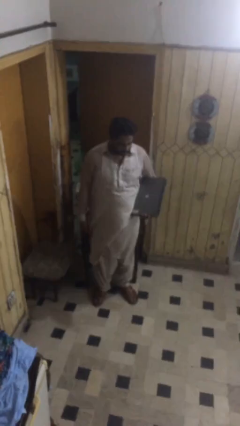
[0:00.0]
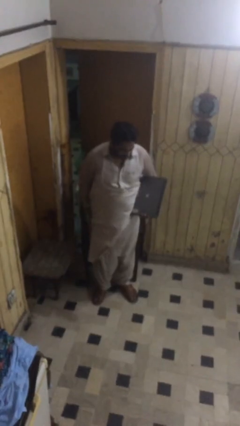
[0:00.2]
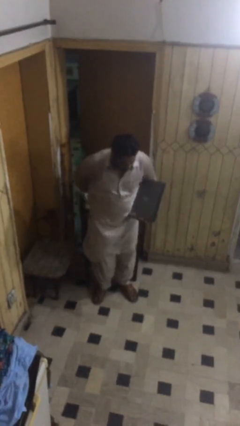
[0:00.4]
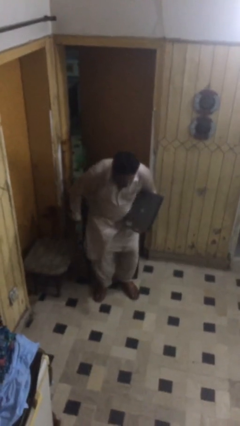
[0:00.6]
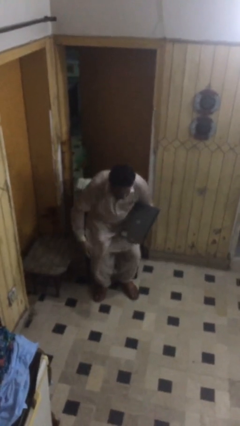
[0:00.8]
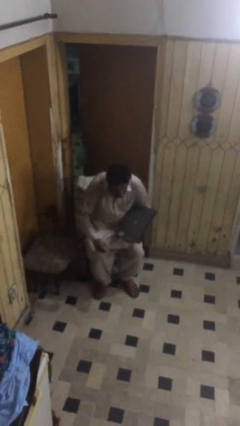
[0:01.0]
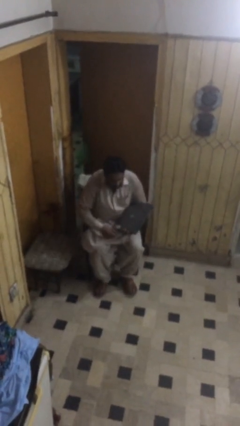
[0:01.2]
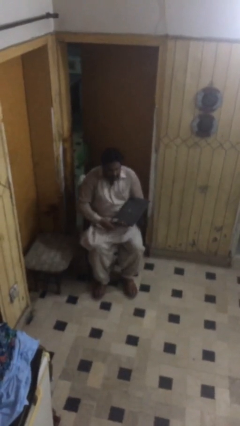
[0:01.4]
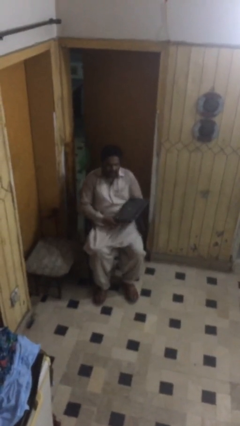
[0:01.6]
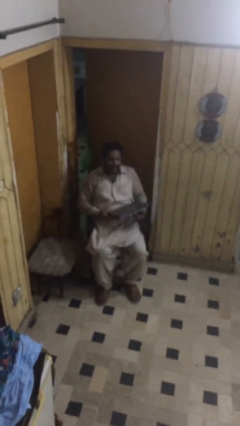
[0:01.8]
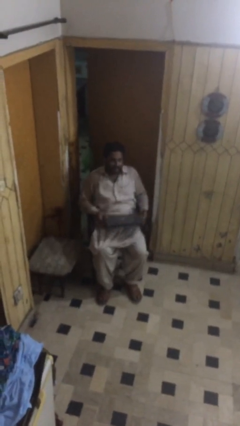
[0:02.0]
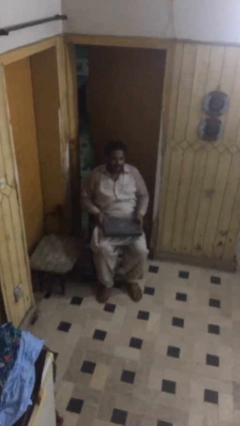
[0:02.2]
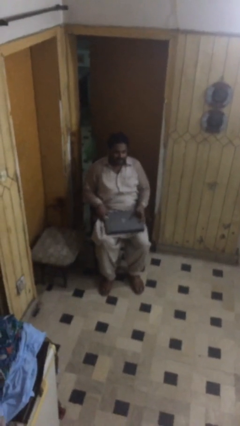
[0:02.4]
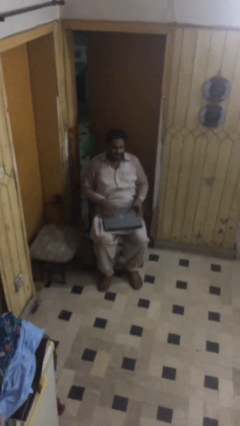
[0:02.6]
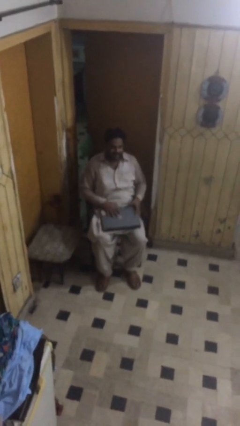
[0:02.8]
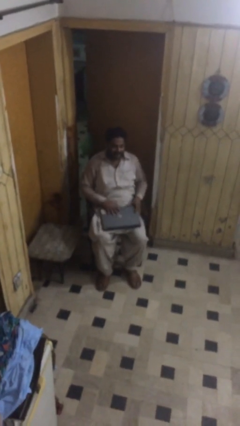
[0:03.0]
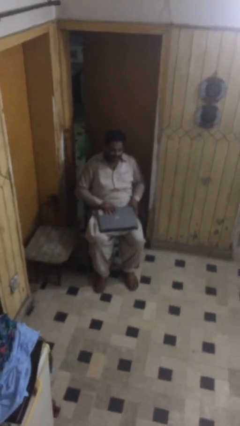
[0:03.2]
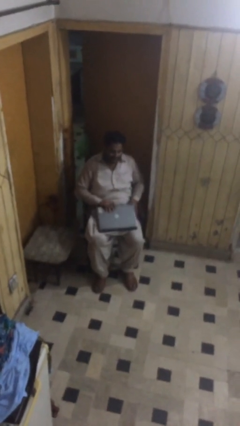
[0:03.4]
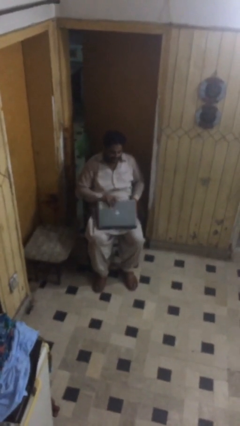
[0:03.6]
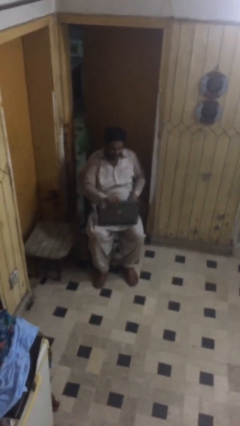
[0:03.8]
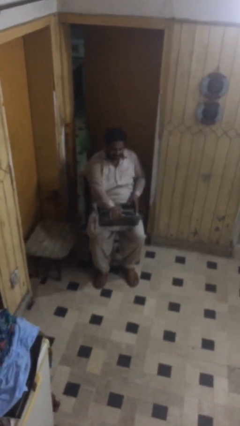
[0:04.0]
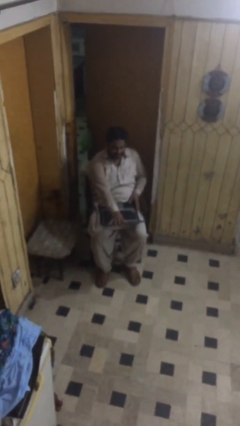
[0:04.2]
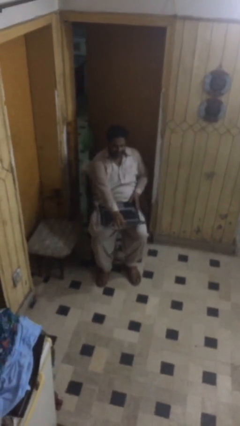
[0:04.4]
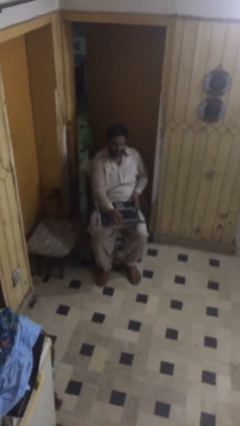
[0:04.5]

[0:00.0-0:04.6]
person sits down

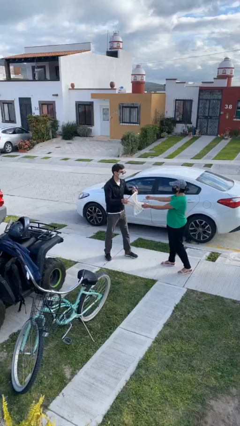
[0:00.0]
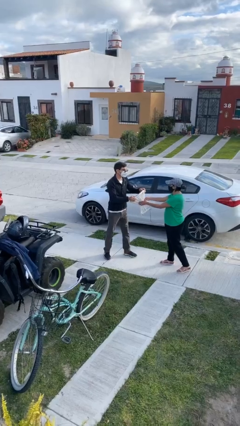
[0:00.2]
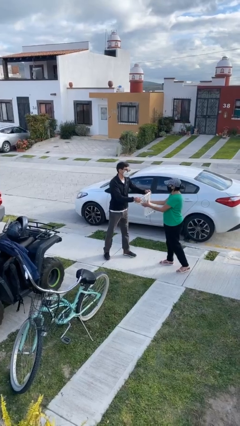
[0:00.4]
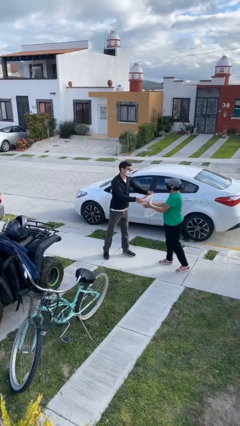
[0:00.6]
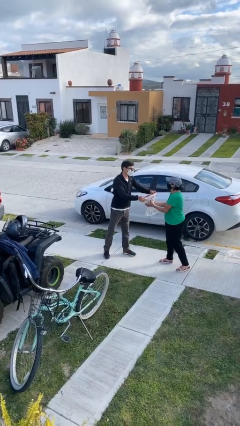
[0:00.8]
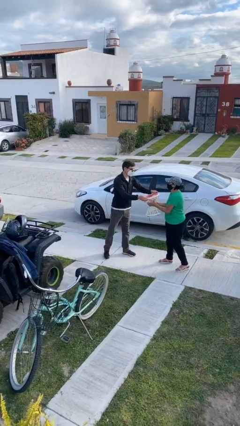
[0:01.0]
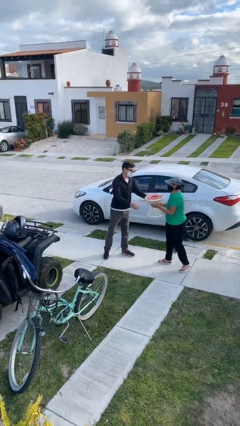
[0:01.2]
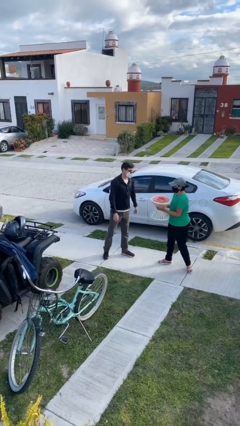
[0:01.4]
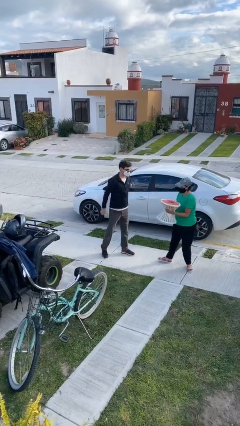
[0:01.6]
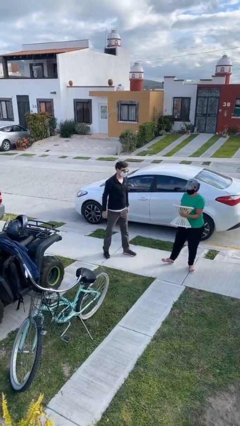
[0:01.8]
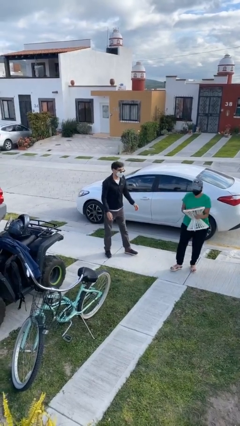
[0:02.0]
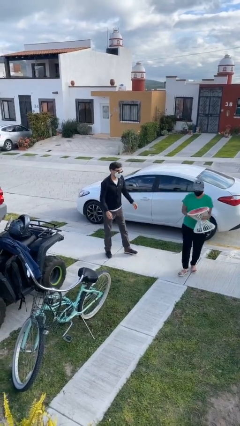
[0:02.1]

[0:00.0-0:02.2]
person transfers object to person

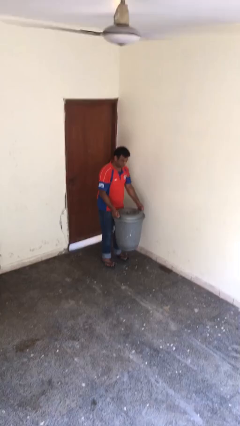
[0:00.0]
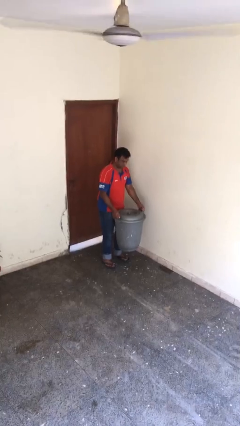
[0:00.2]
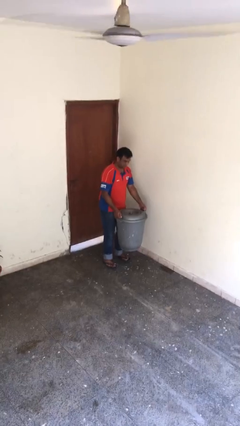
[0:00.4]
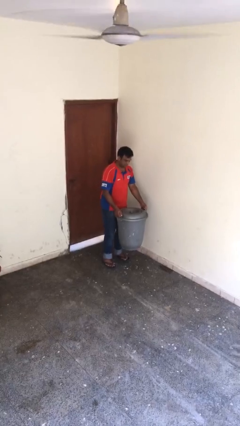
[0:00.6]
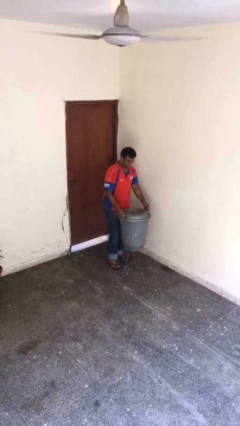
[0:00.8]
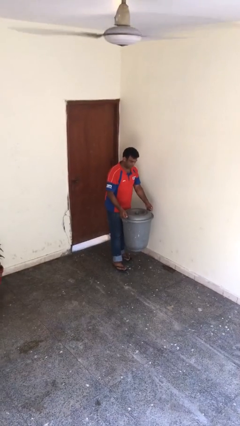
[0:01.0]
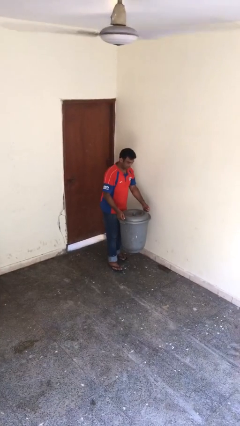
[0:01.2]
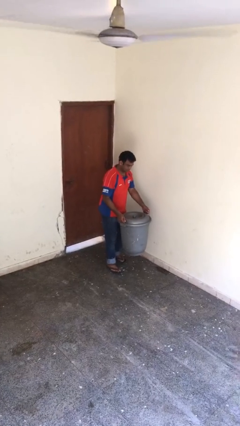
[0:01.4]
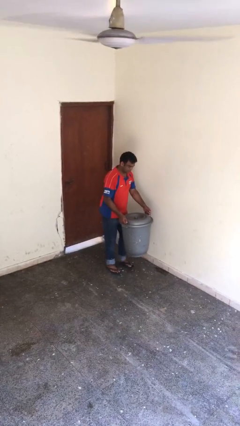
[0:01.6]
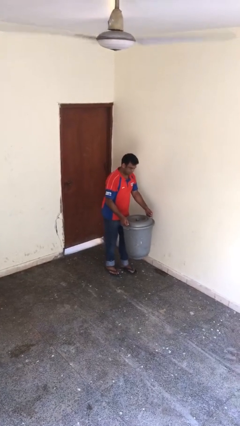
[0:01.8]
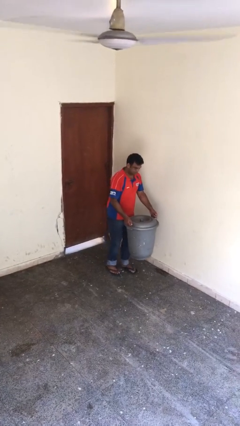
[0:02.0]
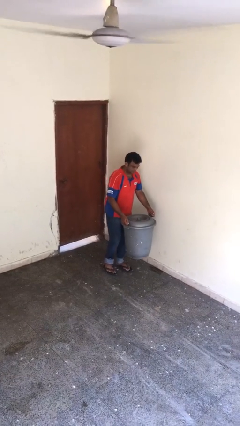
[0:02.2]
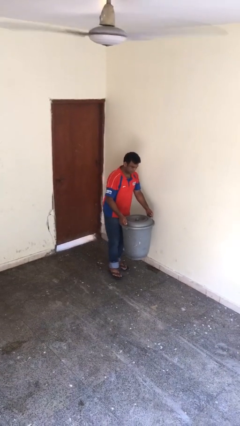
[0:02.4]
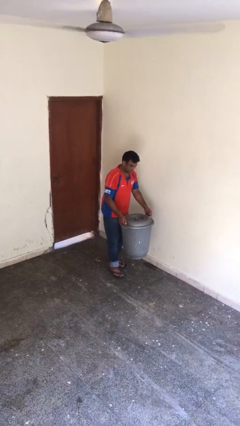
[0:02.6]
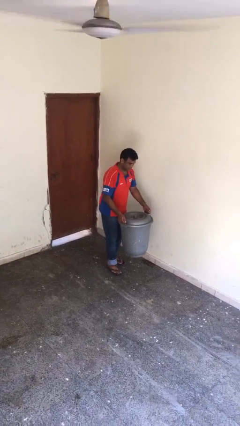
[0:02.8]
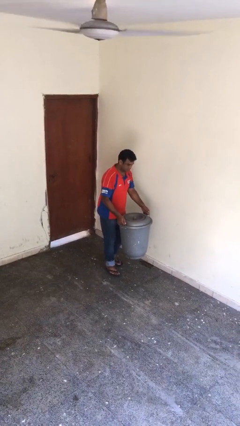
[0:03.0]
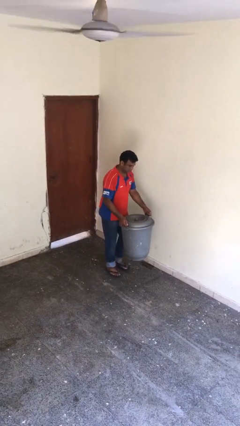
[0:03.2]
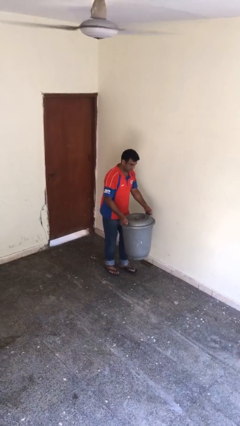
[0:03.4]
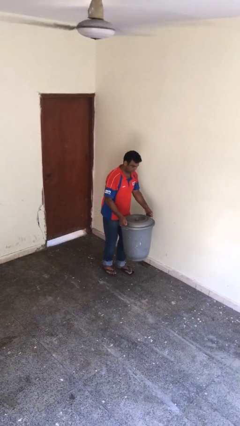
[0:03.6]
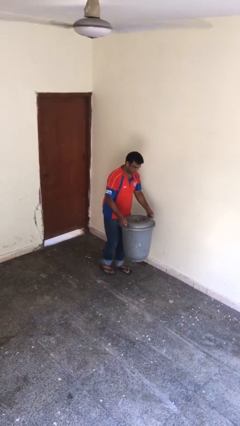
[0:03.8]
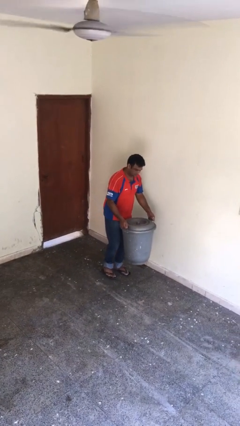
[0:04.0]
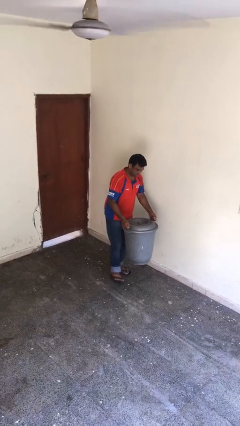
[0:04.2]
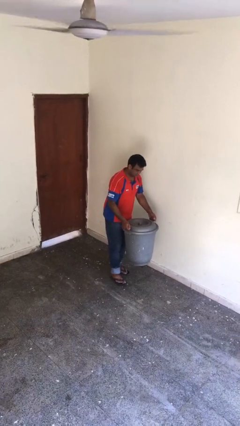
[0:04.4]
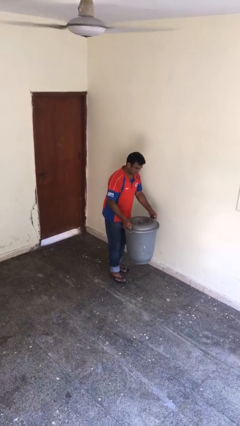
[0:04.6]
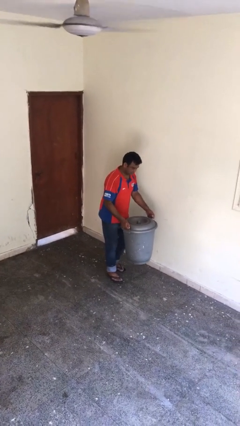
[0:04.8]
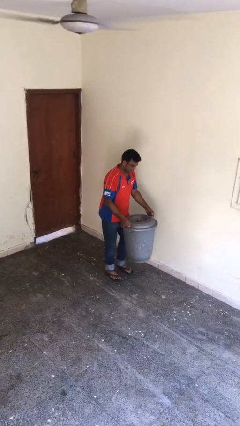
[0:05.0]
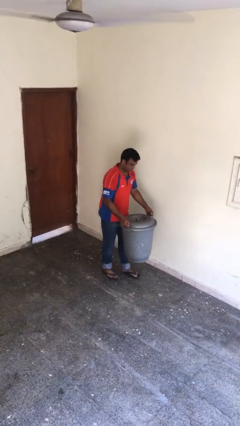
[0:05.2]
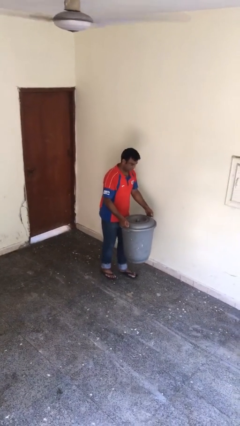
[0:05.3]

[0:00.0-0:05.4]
person carries heavy object

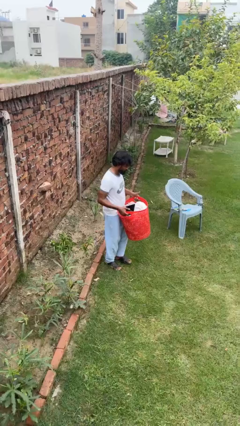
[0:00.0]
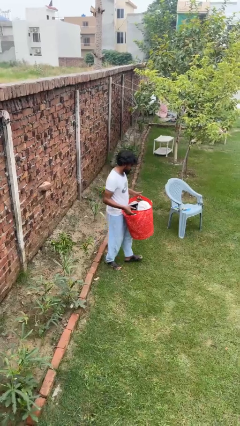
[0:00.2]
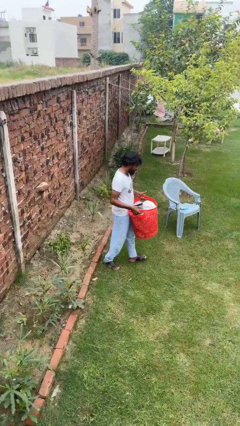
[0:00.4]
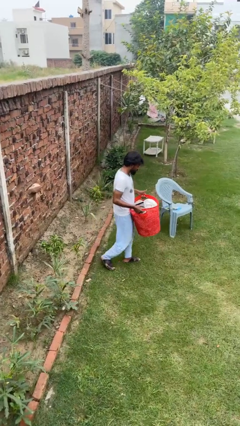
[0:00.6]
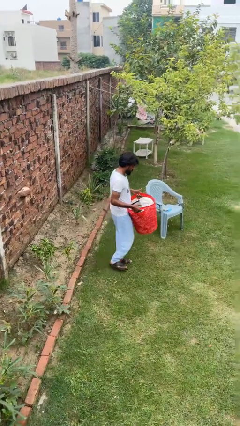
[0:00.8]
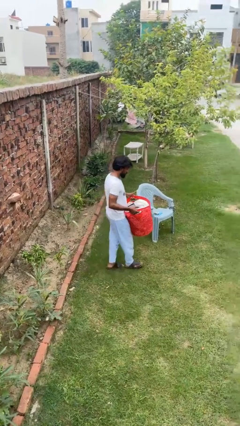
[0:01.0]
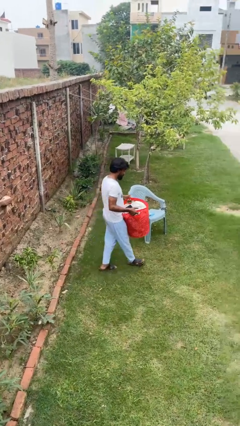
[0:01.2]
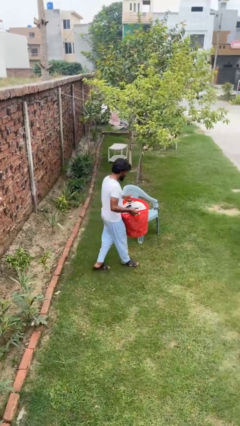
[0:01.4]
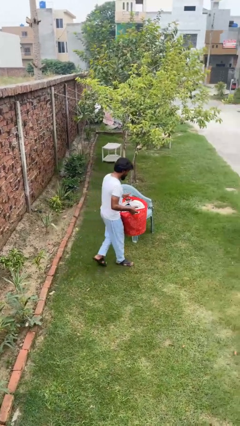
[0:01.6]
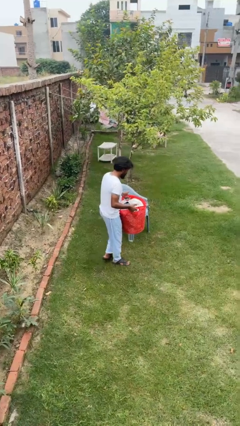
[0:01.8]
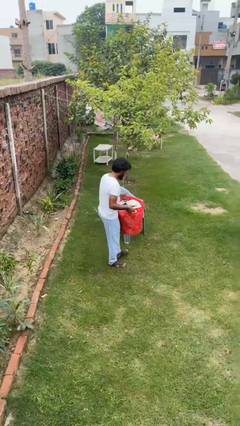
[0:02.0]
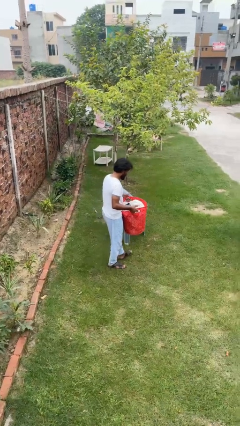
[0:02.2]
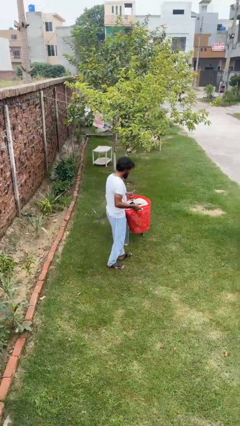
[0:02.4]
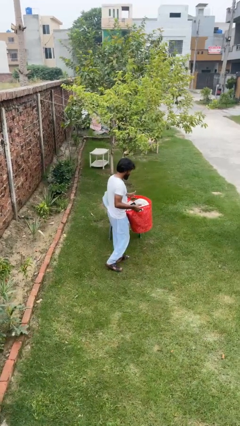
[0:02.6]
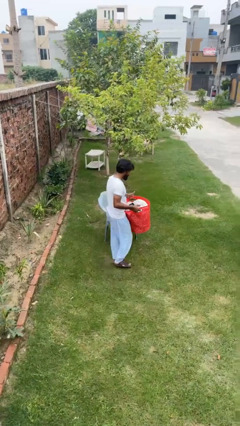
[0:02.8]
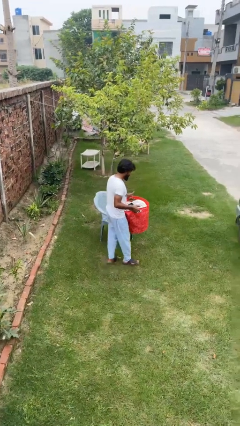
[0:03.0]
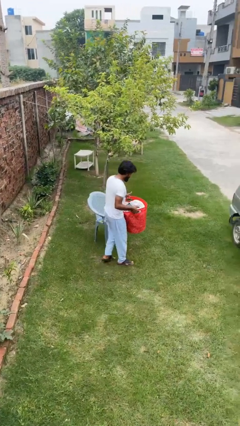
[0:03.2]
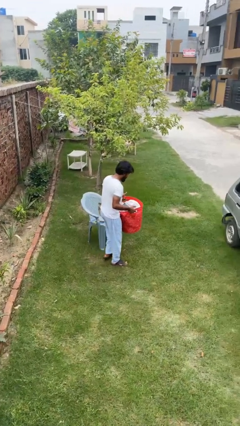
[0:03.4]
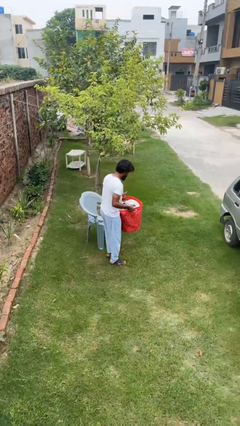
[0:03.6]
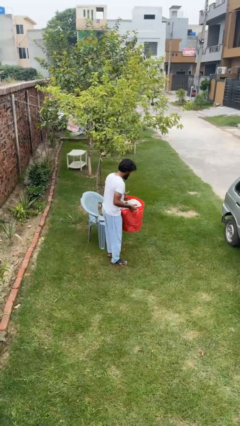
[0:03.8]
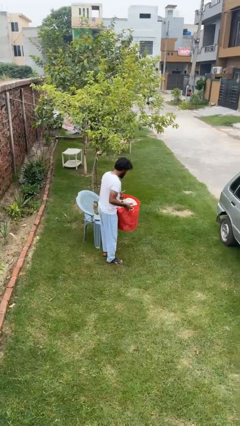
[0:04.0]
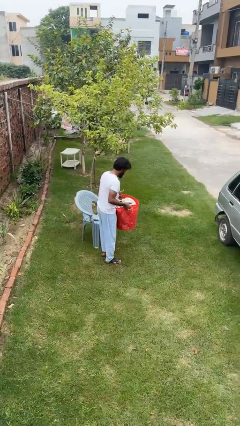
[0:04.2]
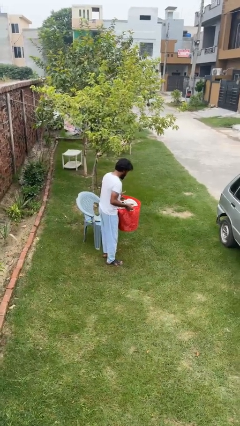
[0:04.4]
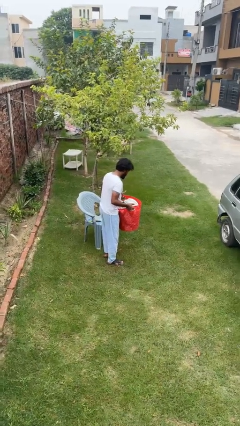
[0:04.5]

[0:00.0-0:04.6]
person carries laundry basket

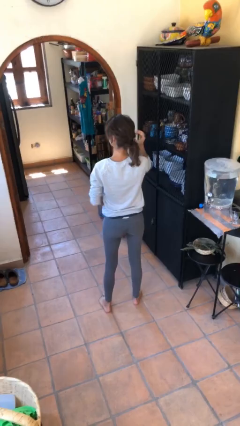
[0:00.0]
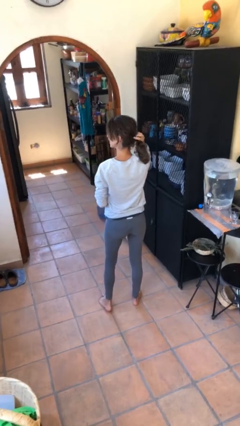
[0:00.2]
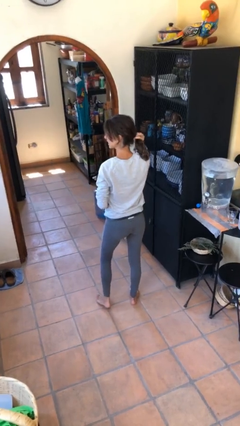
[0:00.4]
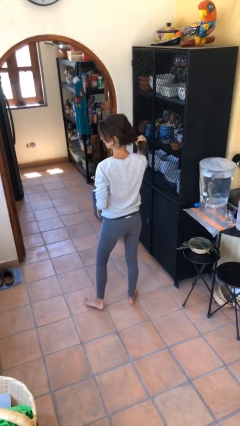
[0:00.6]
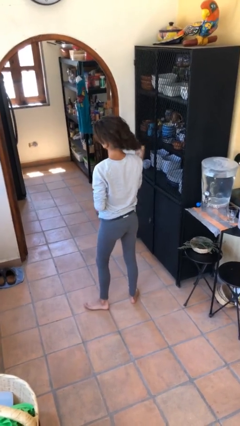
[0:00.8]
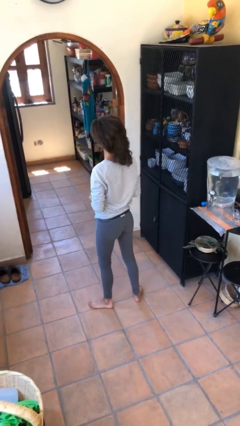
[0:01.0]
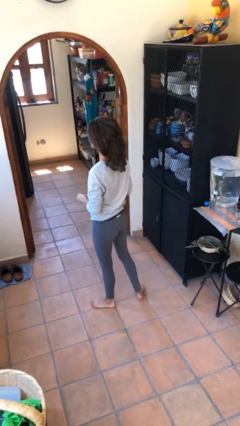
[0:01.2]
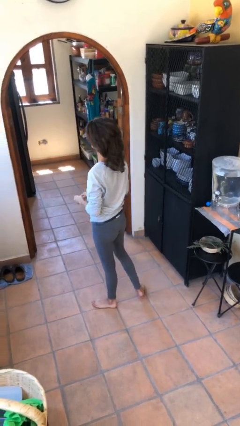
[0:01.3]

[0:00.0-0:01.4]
person takes off hairtie
